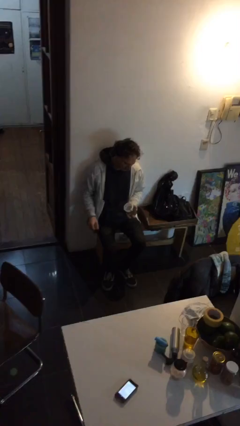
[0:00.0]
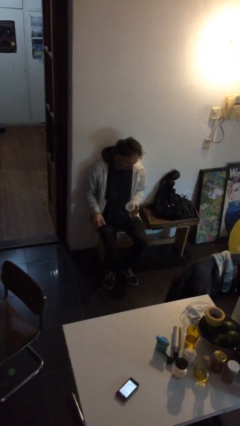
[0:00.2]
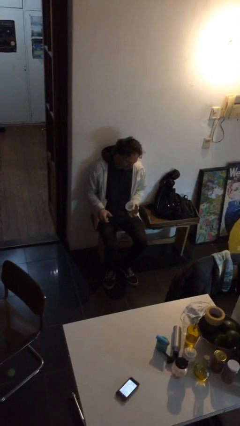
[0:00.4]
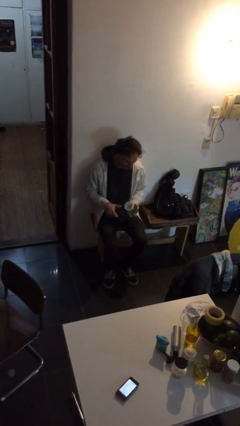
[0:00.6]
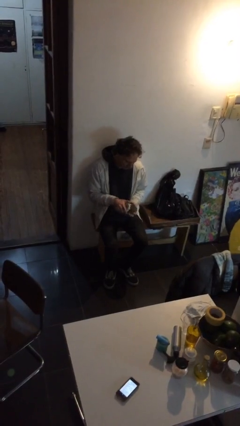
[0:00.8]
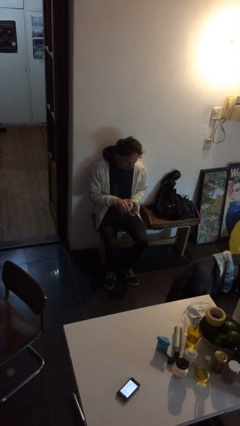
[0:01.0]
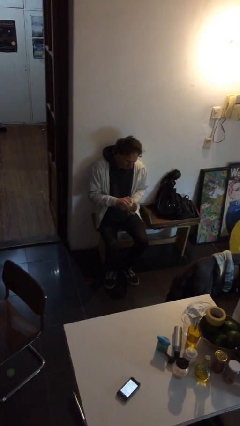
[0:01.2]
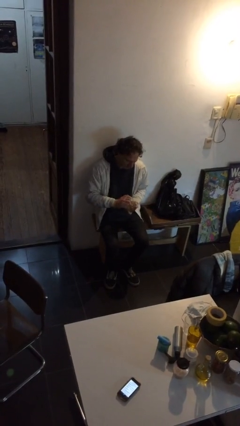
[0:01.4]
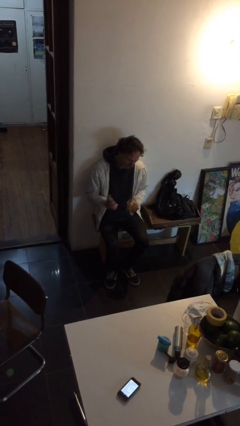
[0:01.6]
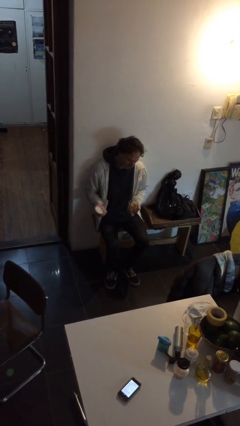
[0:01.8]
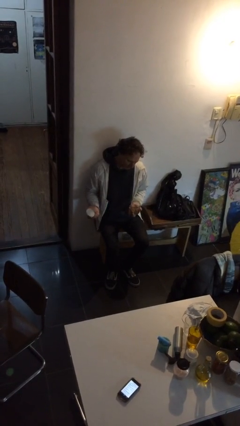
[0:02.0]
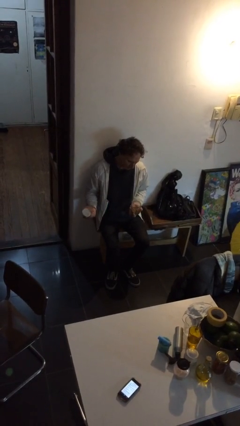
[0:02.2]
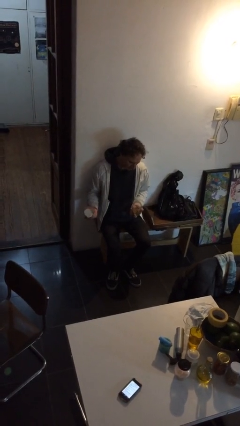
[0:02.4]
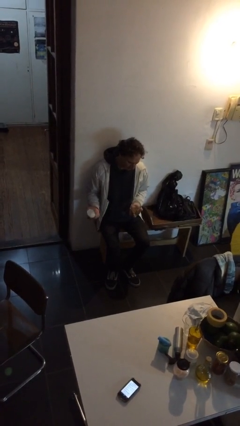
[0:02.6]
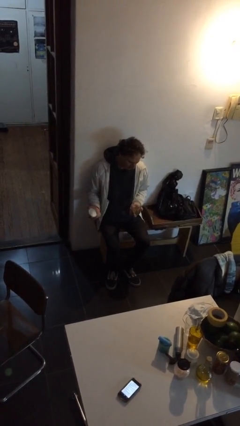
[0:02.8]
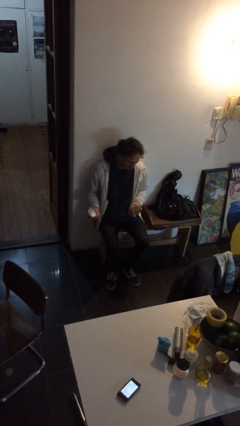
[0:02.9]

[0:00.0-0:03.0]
person opens jar

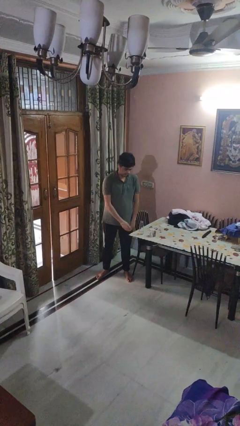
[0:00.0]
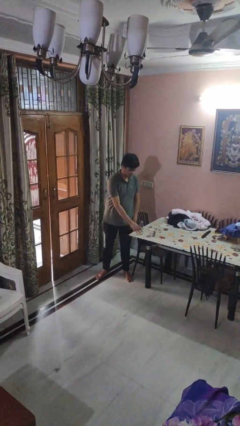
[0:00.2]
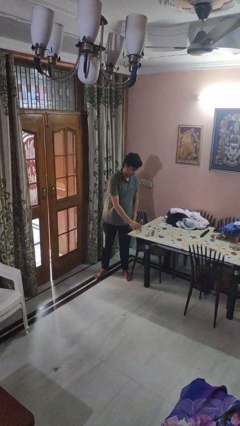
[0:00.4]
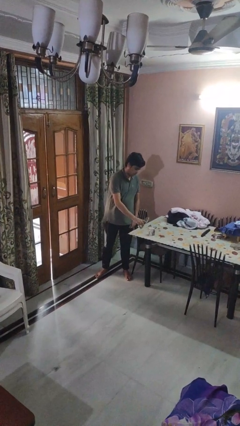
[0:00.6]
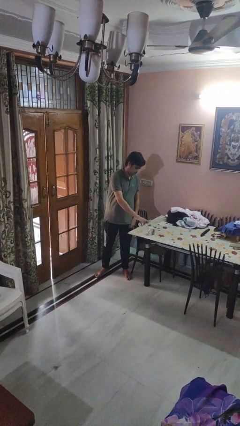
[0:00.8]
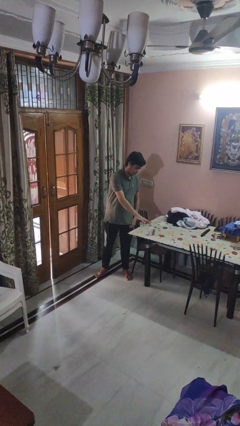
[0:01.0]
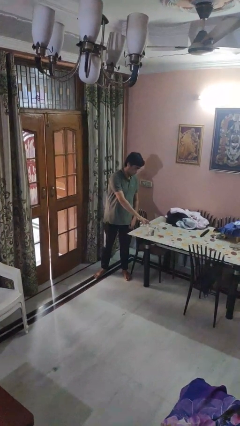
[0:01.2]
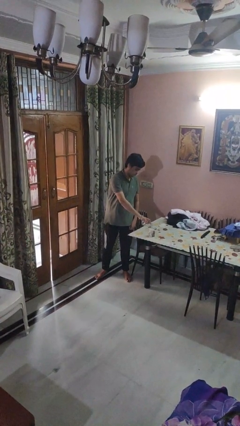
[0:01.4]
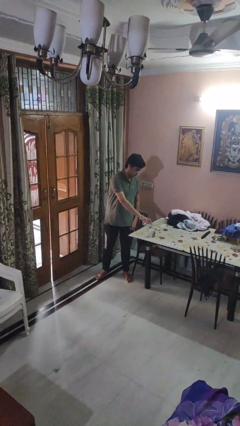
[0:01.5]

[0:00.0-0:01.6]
person pours liquid into cup

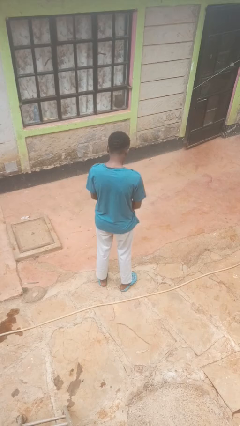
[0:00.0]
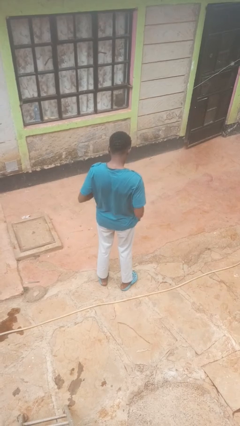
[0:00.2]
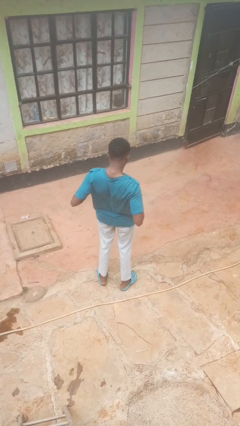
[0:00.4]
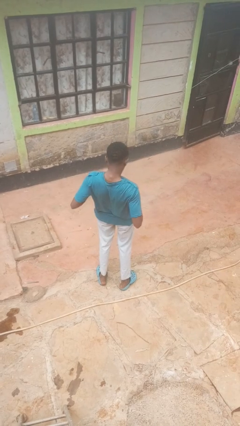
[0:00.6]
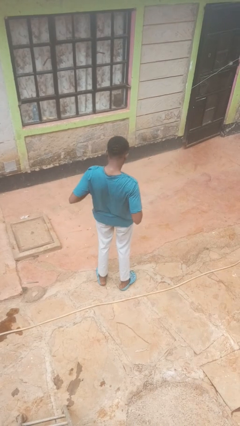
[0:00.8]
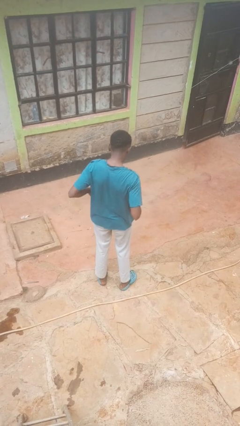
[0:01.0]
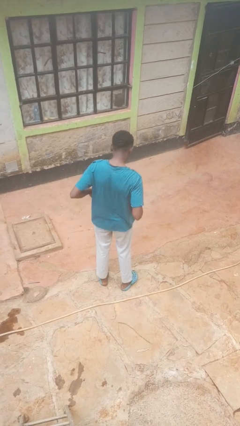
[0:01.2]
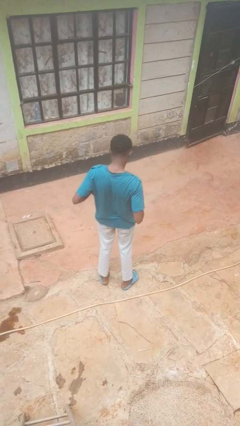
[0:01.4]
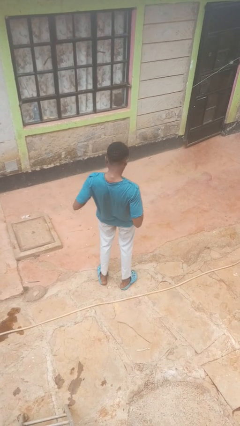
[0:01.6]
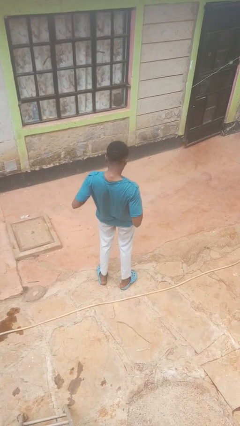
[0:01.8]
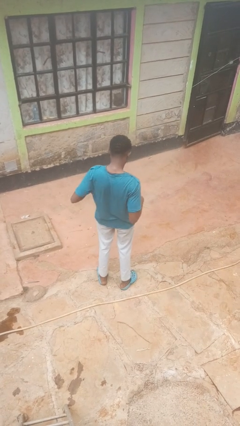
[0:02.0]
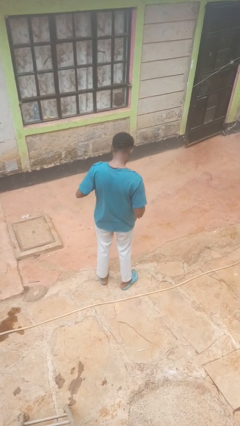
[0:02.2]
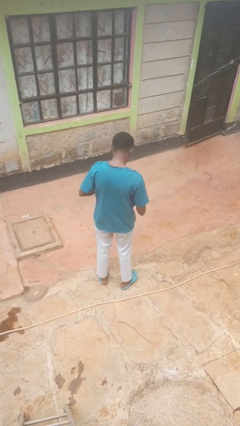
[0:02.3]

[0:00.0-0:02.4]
person wiggles hips

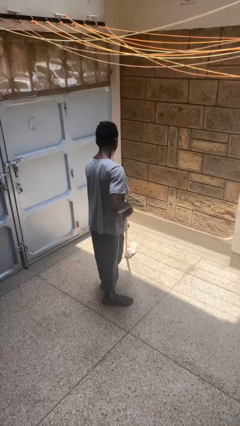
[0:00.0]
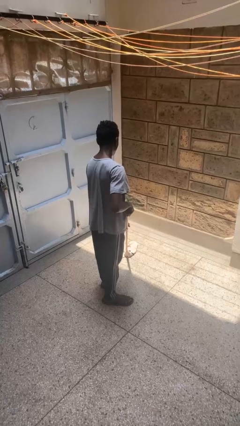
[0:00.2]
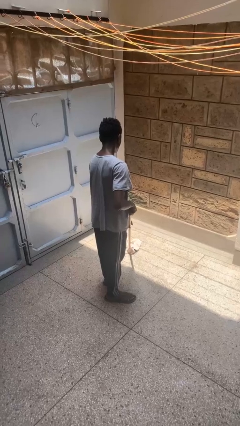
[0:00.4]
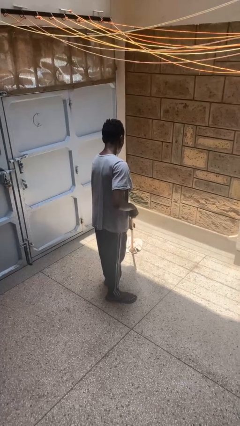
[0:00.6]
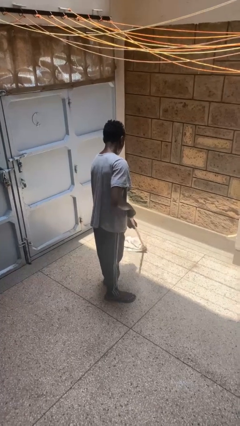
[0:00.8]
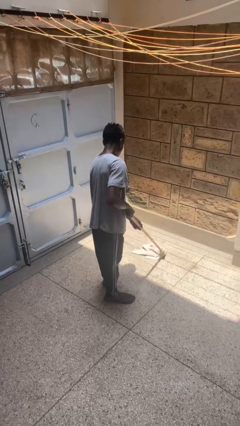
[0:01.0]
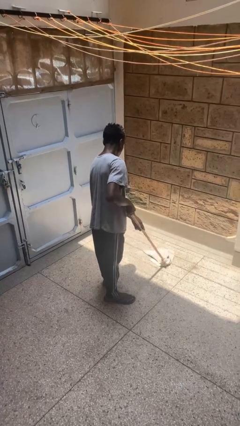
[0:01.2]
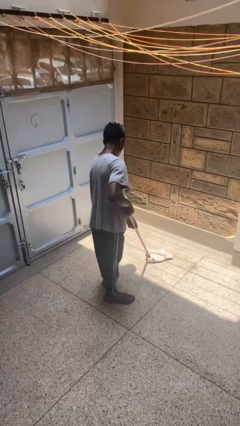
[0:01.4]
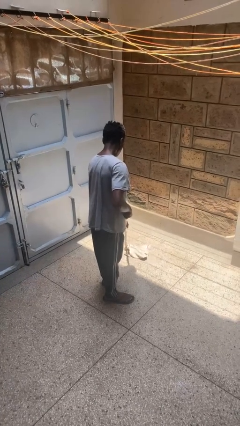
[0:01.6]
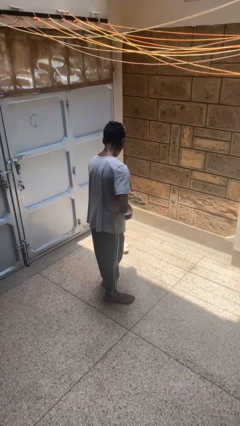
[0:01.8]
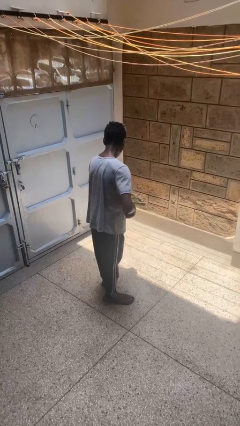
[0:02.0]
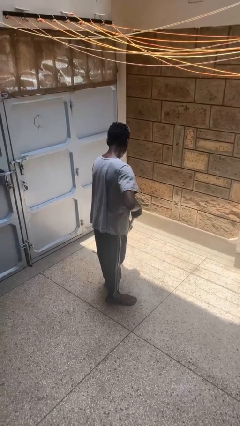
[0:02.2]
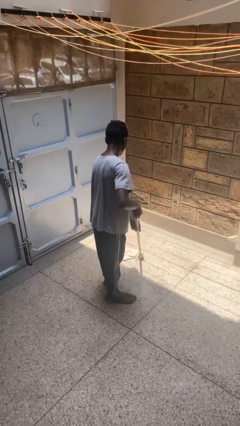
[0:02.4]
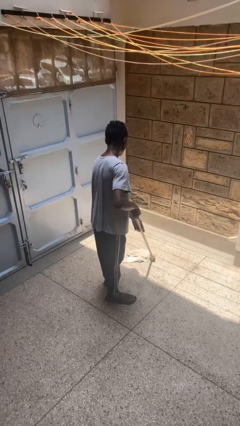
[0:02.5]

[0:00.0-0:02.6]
person mops

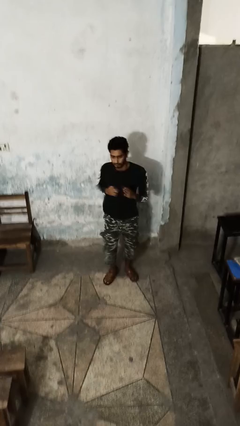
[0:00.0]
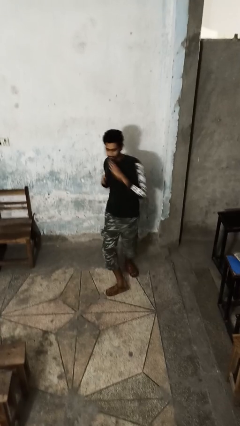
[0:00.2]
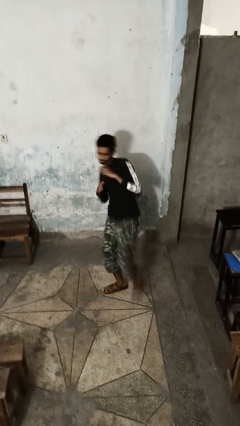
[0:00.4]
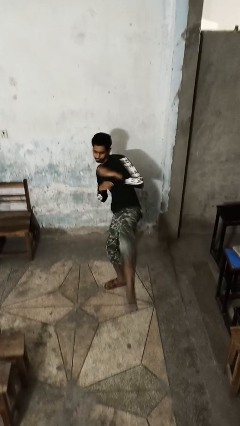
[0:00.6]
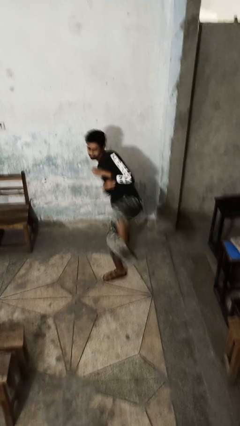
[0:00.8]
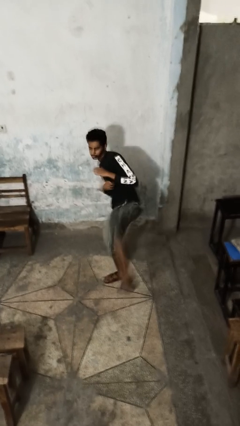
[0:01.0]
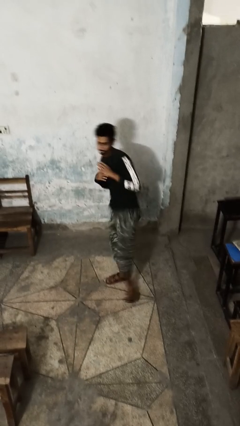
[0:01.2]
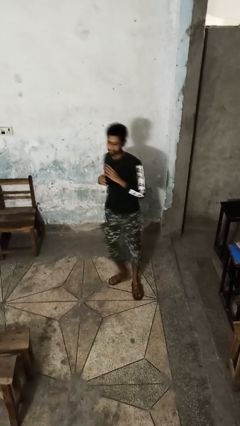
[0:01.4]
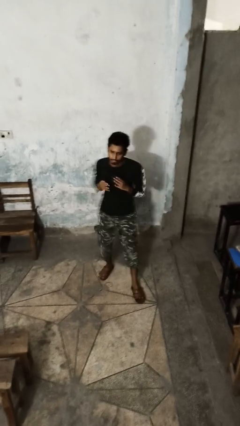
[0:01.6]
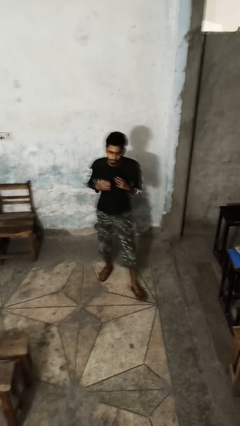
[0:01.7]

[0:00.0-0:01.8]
person karate kicks

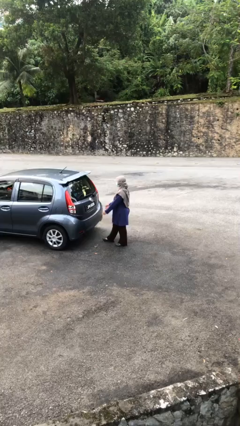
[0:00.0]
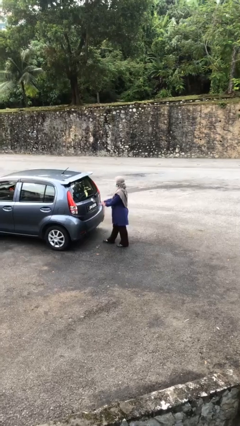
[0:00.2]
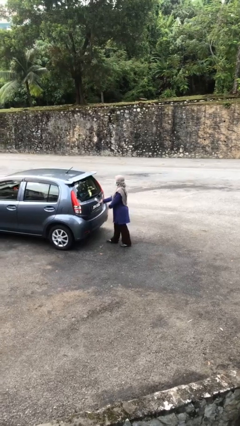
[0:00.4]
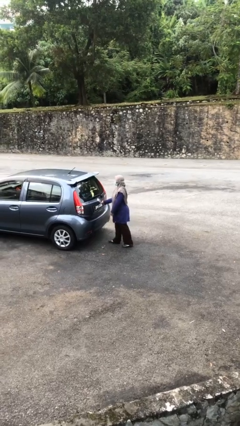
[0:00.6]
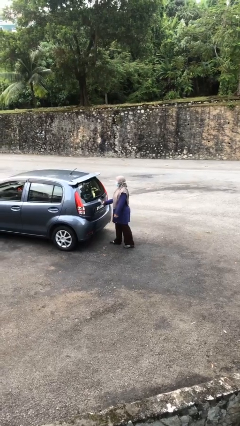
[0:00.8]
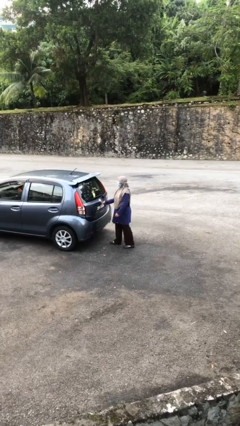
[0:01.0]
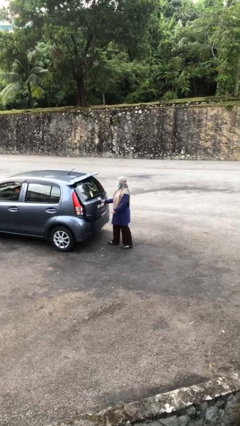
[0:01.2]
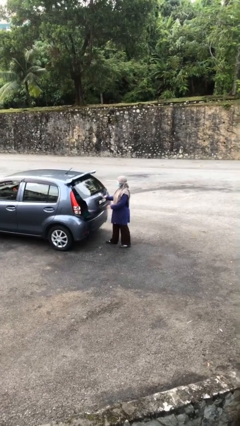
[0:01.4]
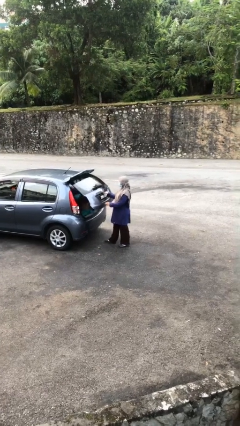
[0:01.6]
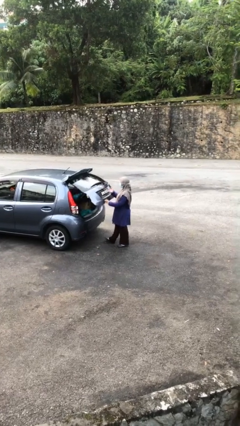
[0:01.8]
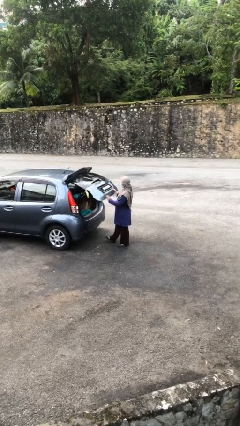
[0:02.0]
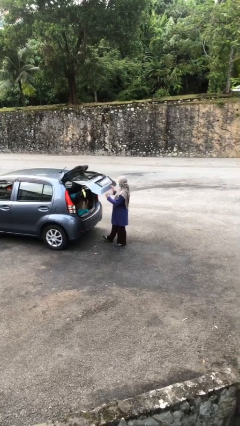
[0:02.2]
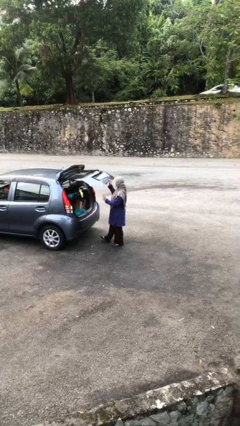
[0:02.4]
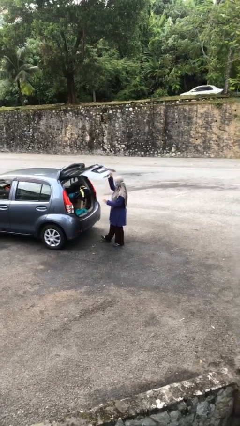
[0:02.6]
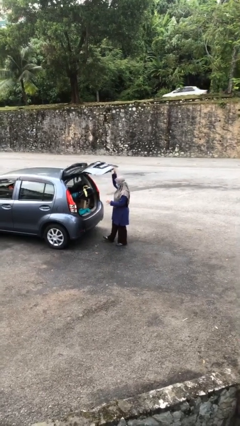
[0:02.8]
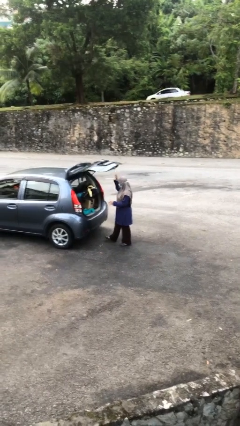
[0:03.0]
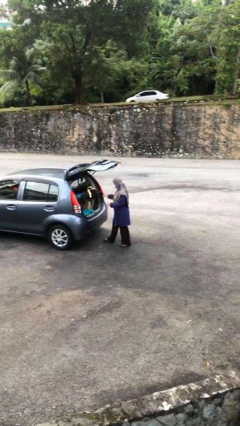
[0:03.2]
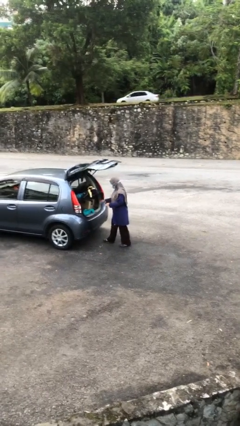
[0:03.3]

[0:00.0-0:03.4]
person opens car trunk

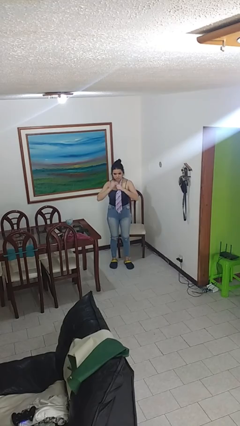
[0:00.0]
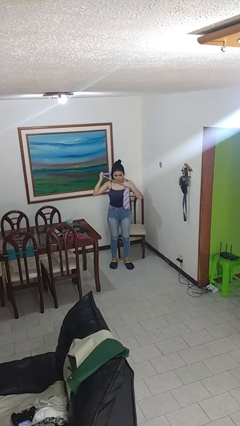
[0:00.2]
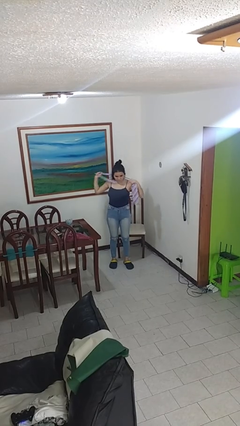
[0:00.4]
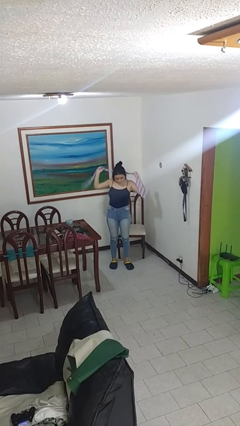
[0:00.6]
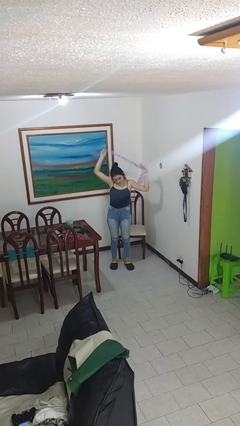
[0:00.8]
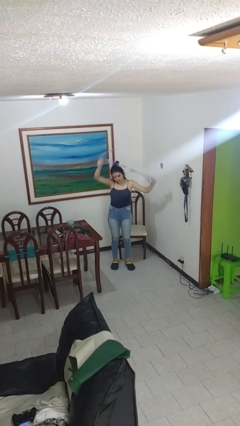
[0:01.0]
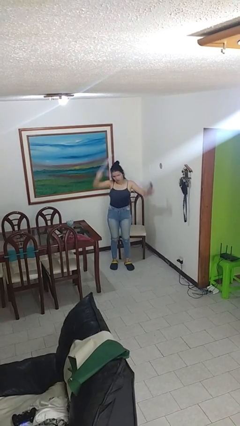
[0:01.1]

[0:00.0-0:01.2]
person takes off necktie

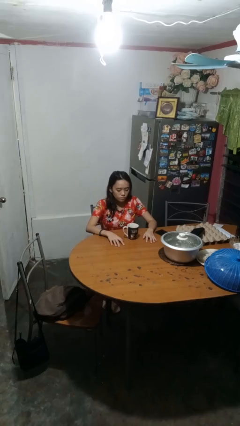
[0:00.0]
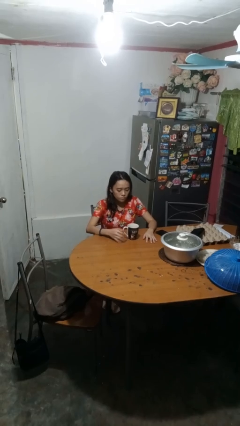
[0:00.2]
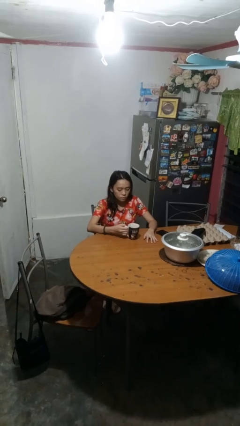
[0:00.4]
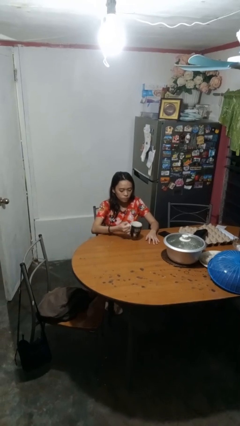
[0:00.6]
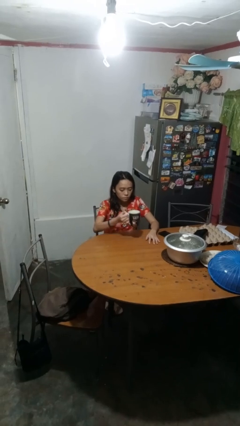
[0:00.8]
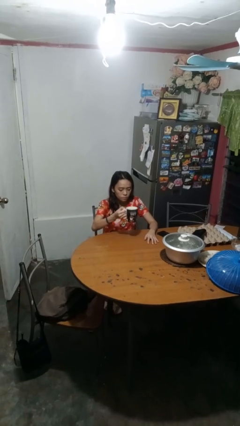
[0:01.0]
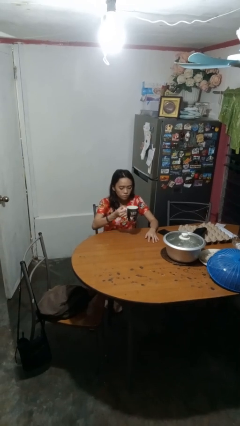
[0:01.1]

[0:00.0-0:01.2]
person picks up object from table
